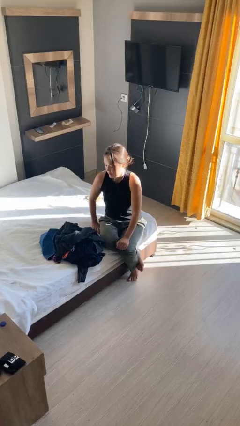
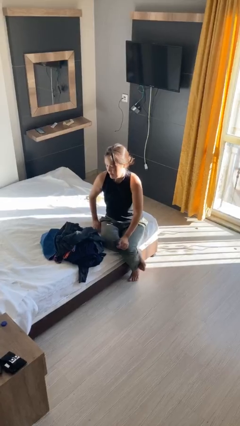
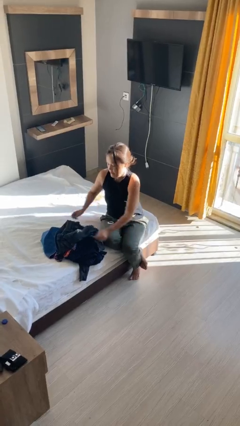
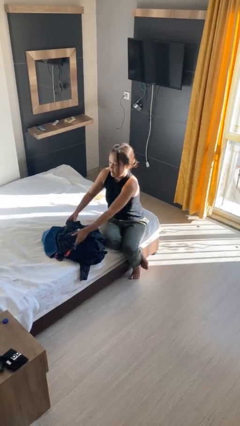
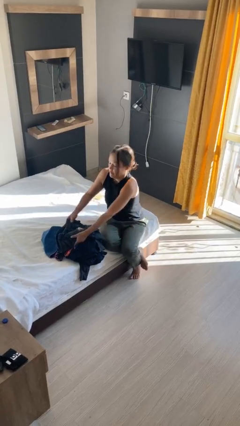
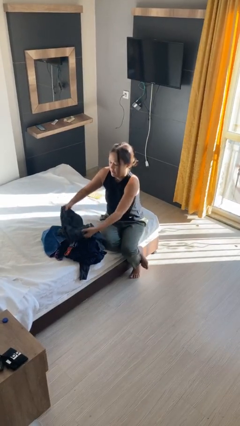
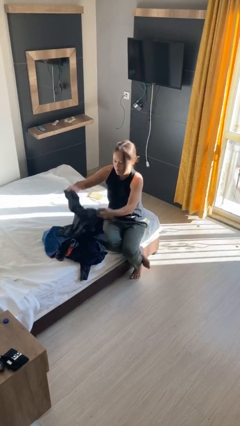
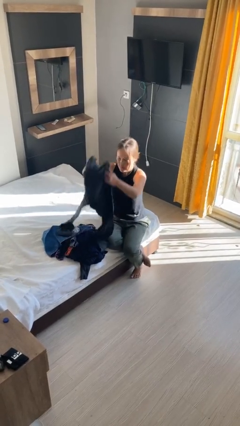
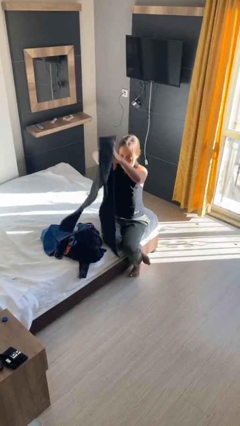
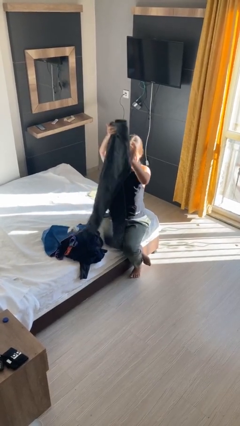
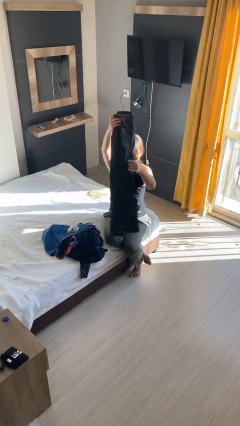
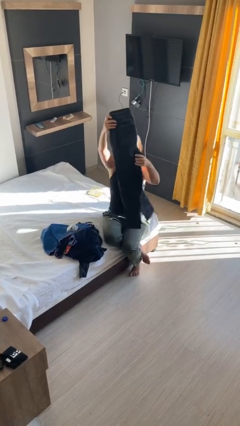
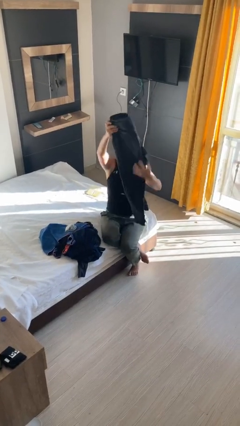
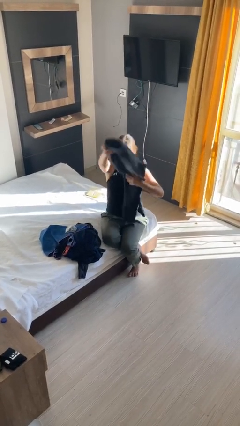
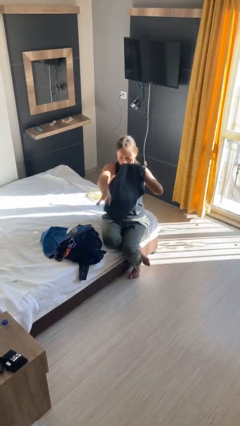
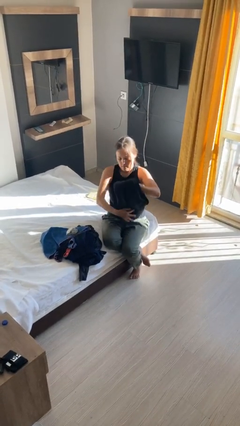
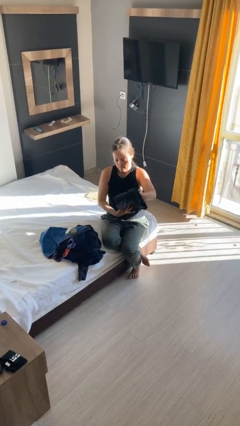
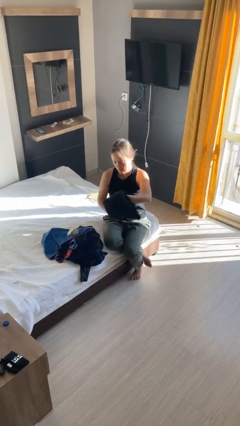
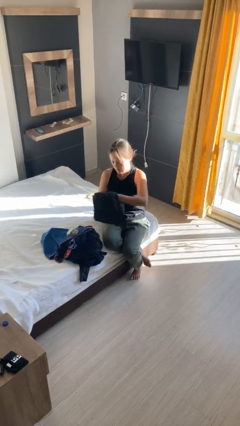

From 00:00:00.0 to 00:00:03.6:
person folds pants

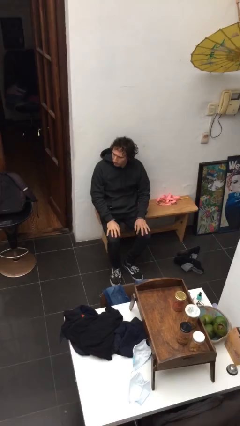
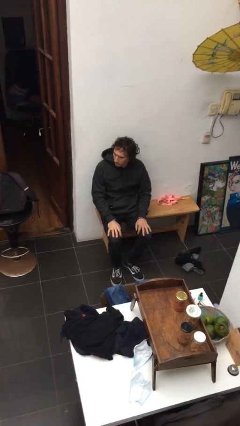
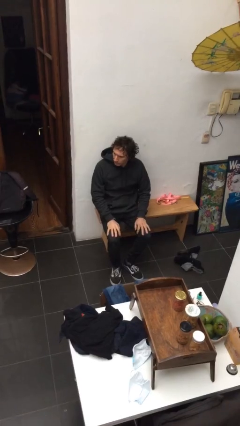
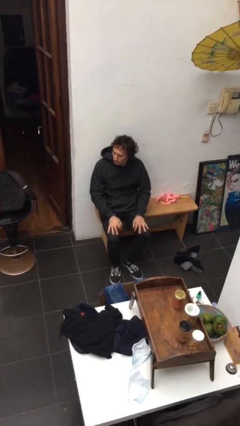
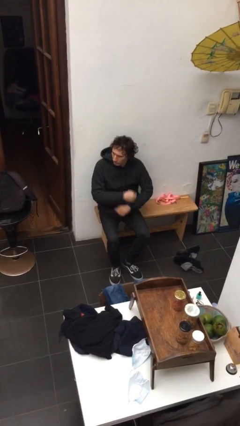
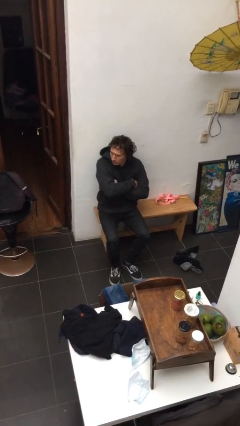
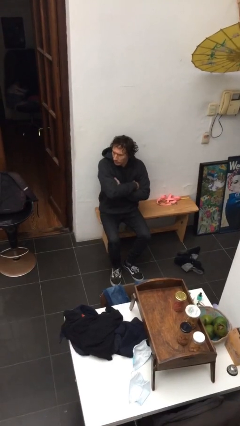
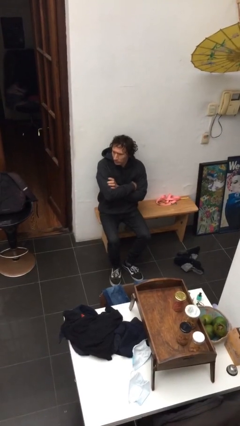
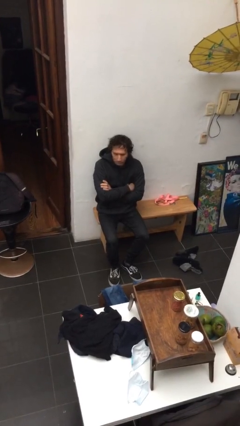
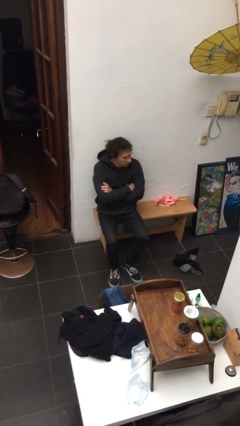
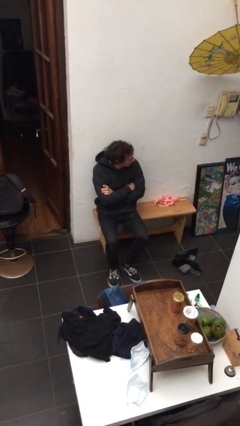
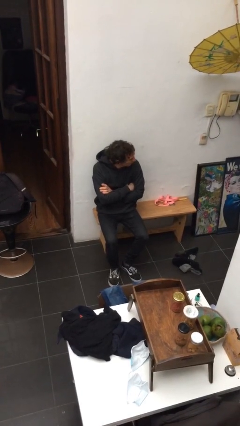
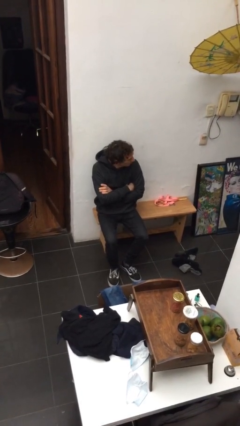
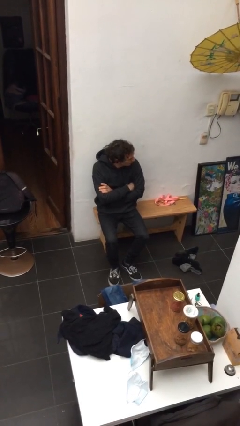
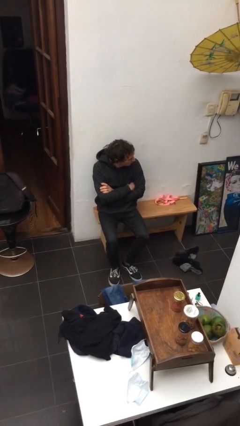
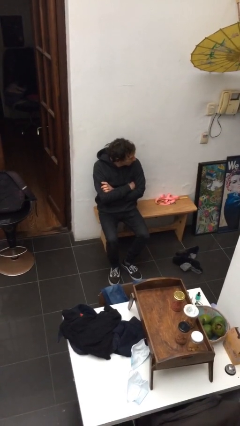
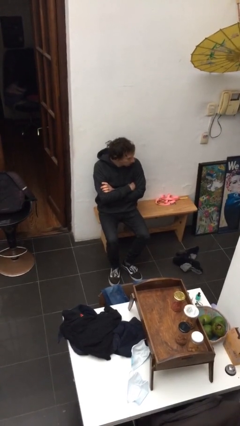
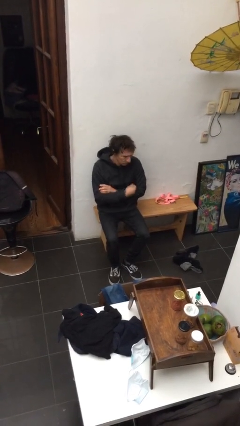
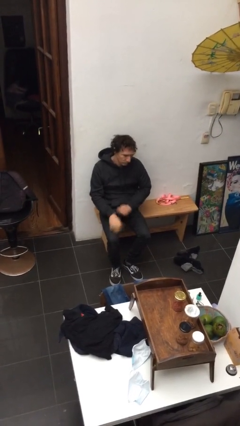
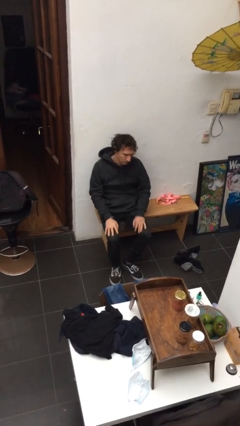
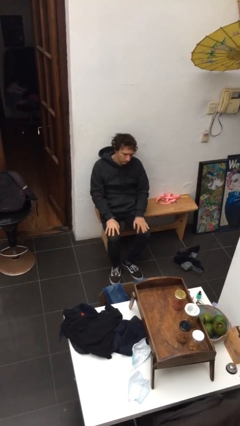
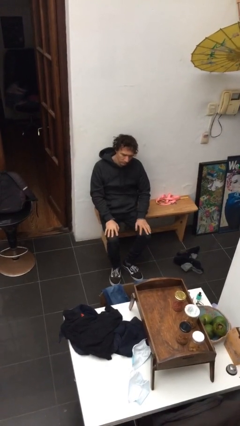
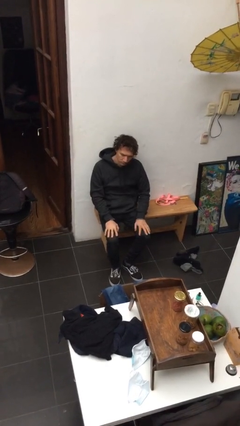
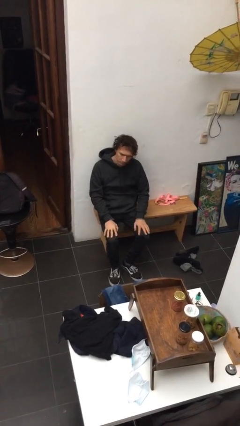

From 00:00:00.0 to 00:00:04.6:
person crosses arms

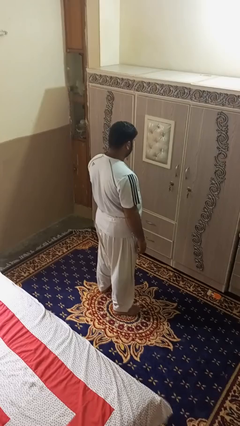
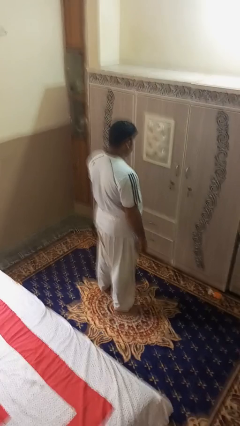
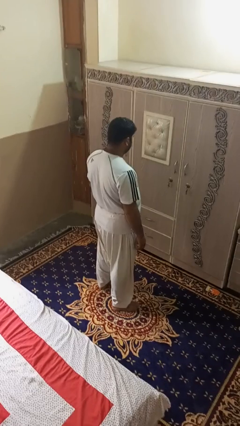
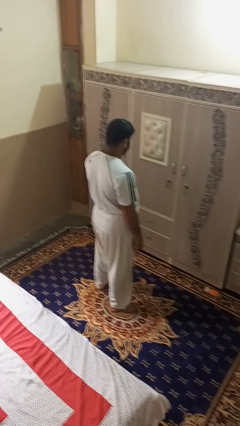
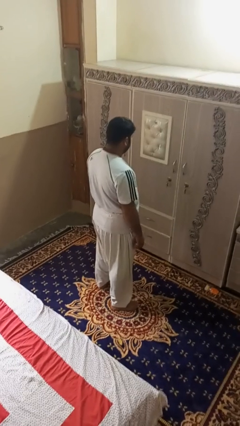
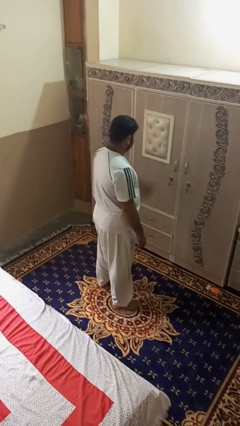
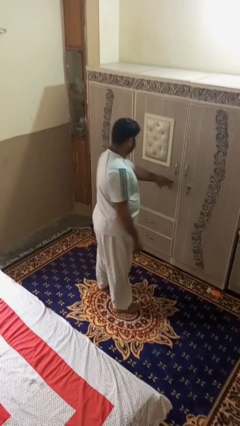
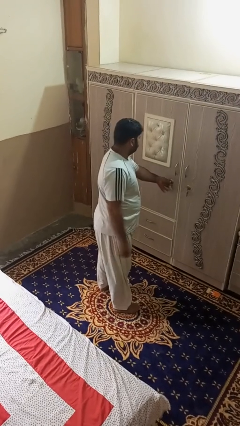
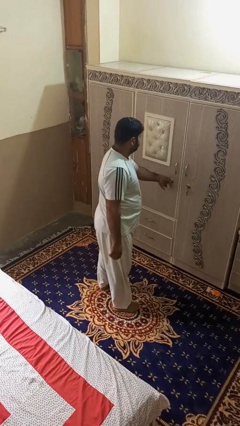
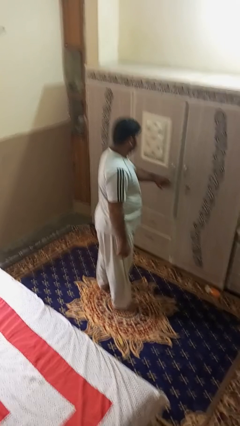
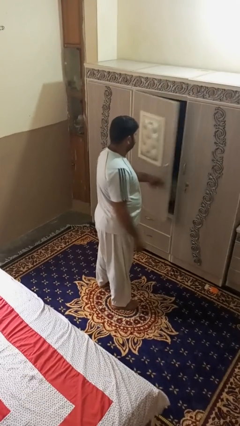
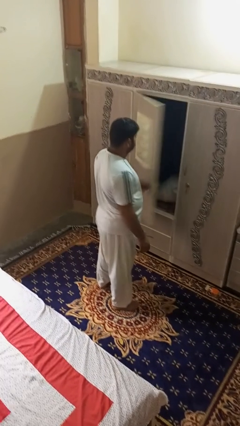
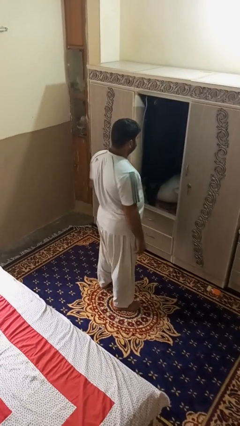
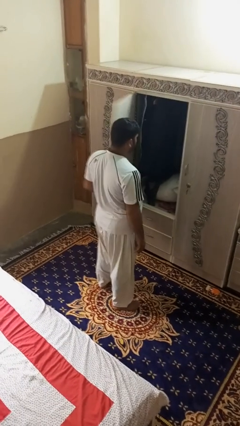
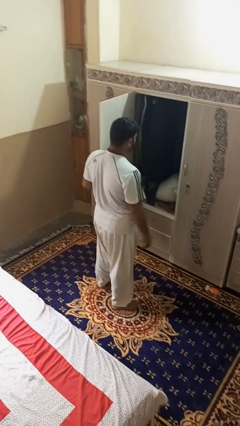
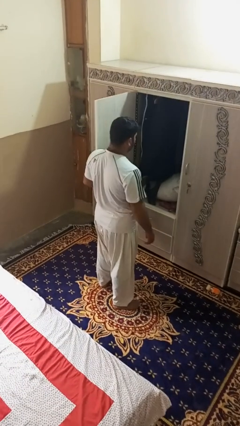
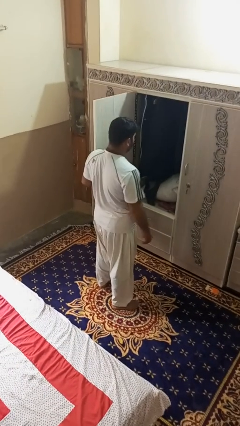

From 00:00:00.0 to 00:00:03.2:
person opens dresser drawer

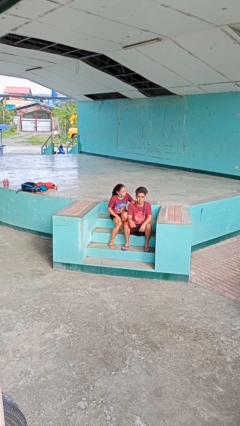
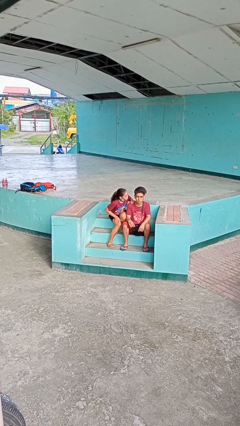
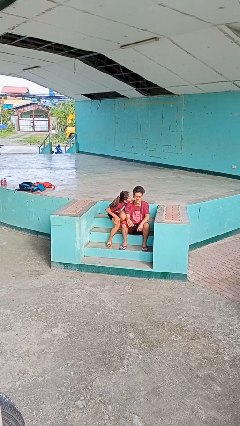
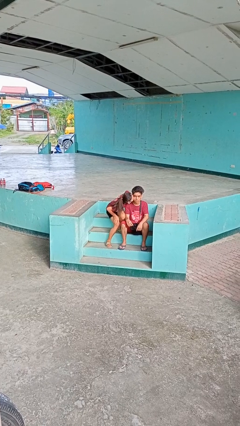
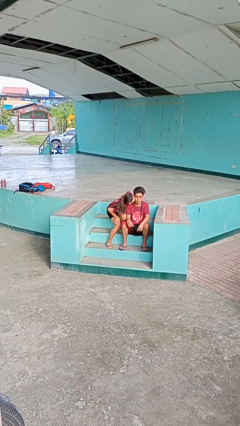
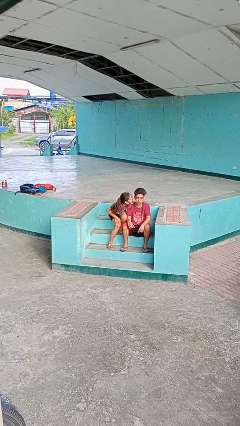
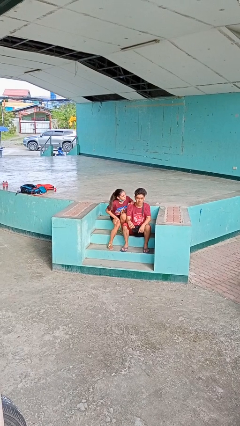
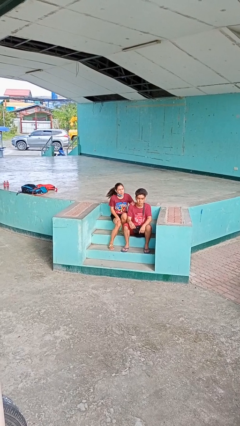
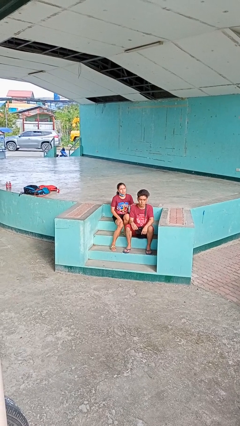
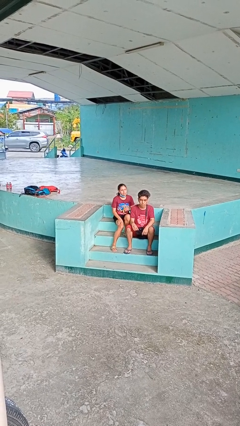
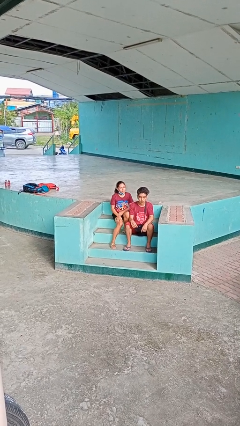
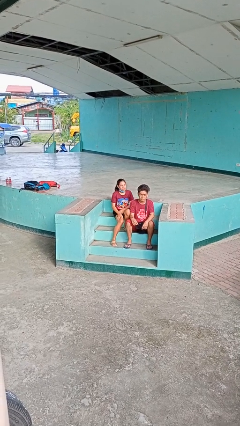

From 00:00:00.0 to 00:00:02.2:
person kisses cheek of person

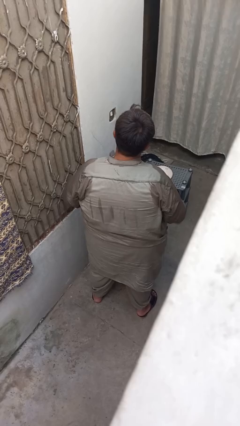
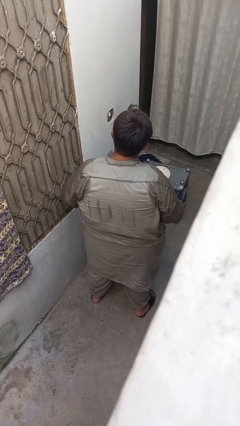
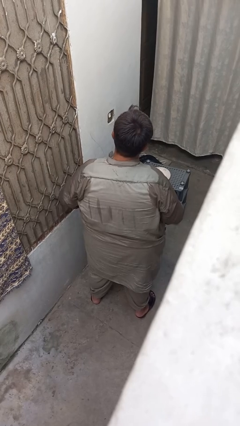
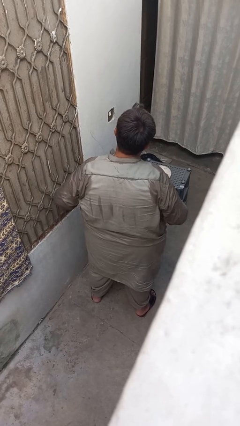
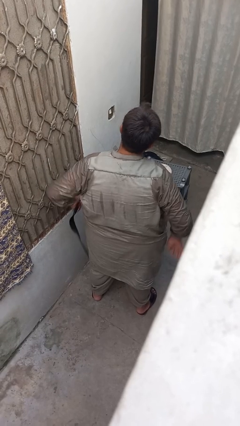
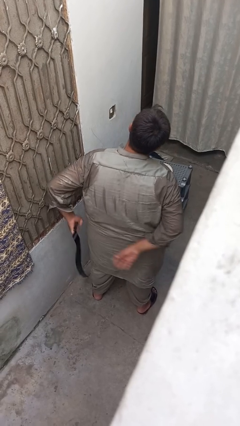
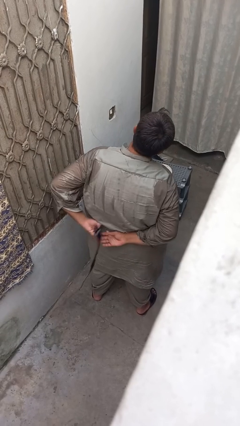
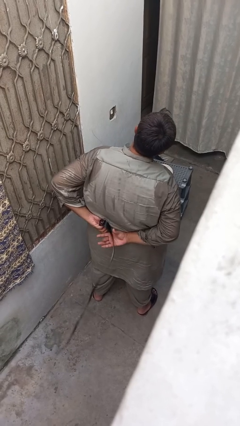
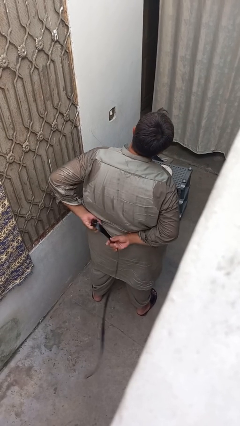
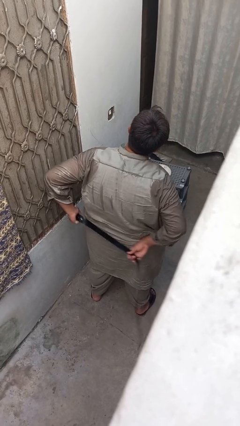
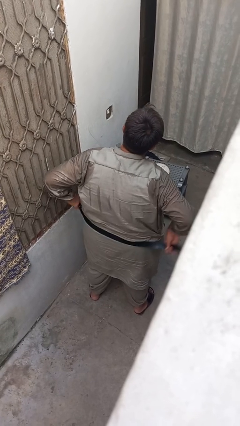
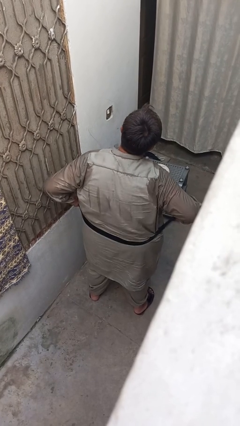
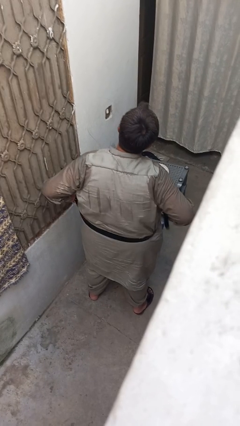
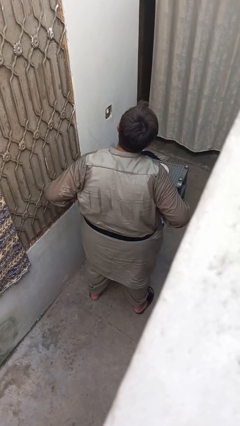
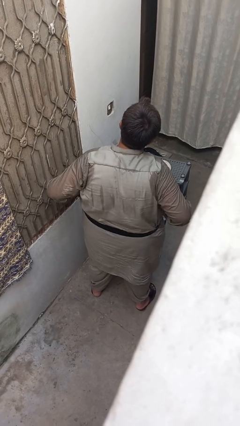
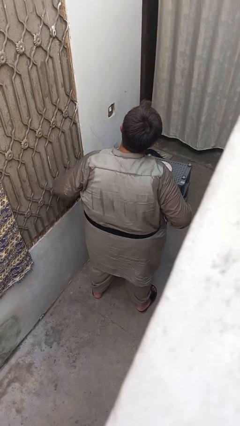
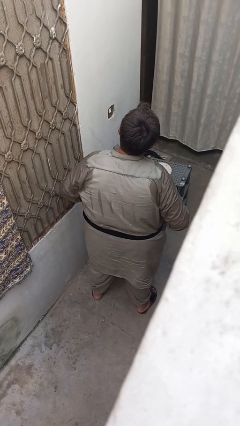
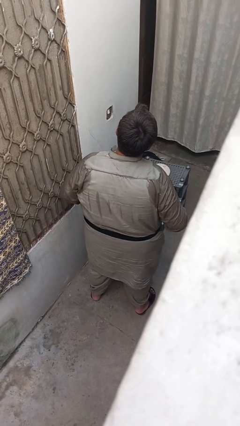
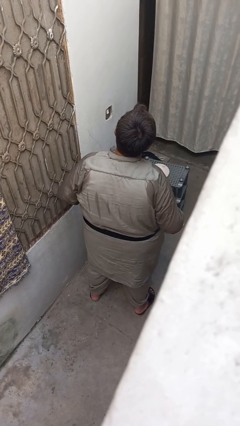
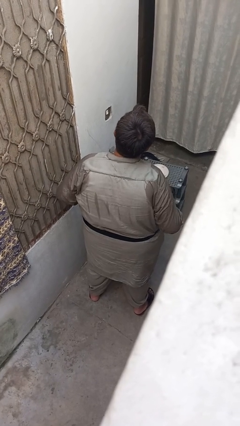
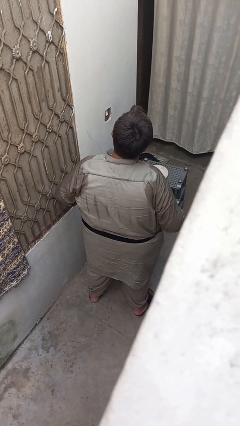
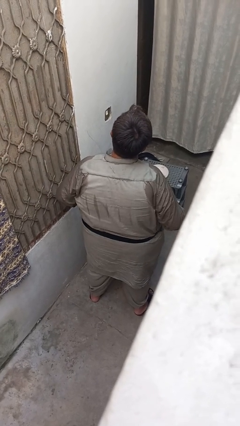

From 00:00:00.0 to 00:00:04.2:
person puts on belt
